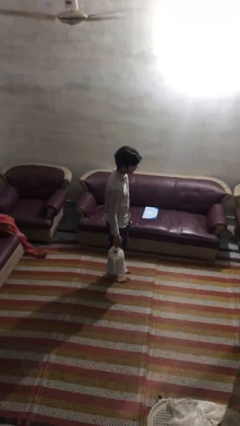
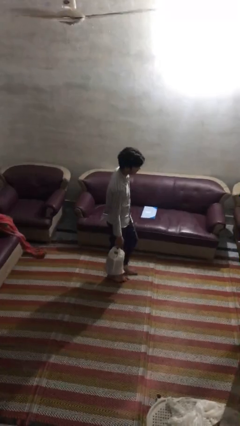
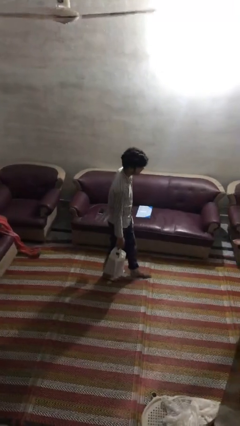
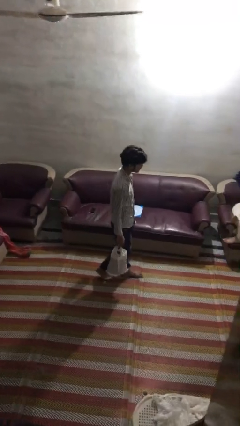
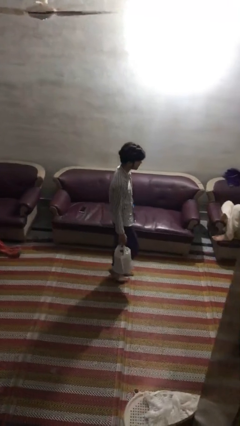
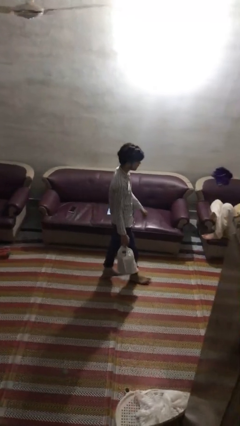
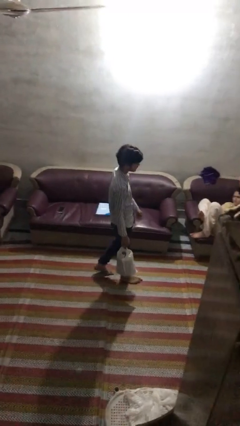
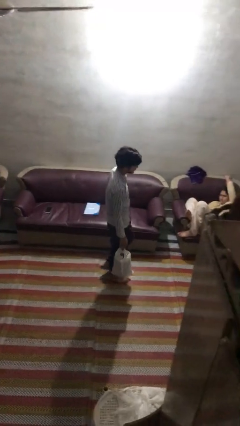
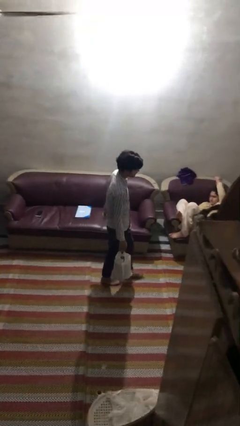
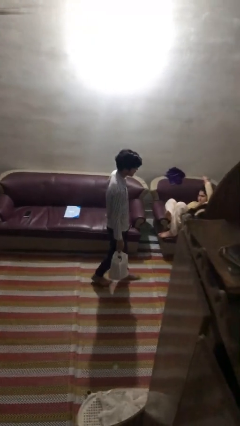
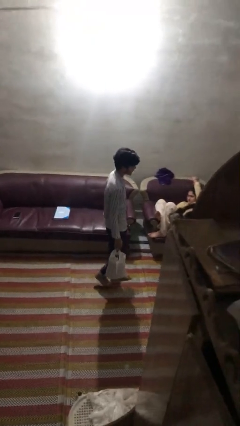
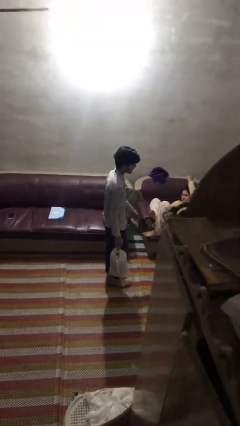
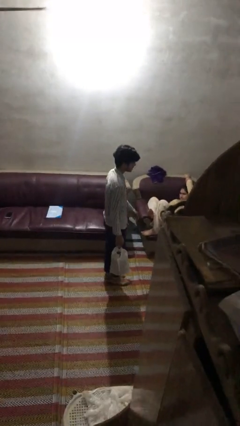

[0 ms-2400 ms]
person carries groceries

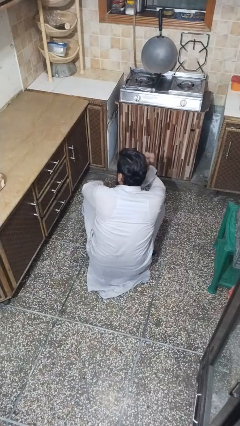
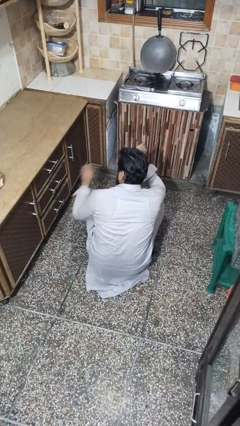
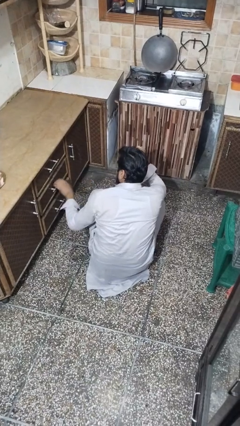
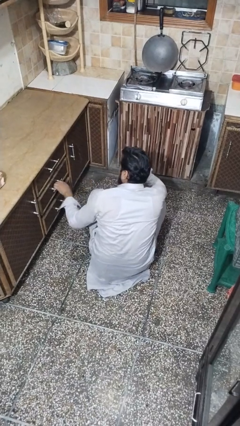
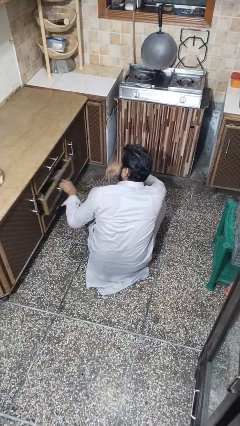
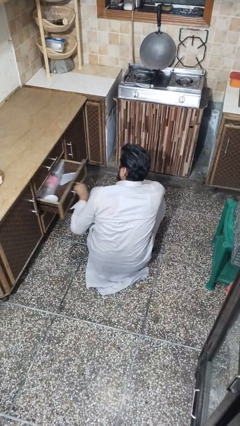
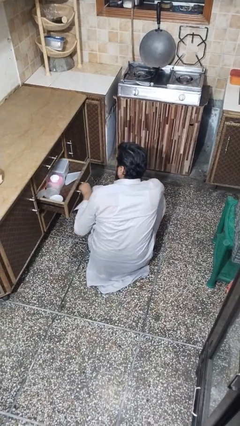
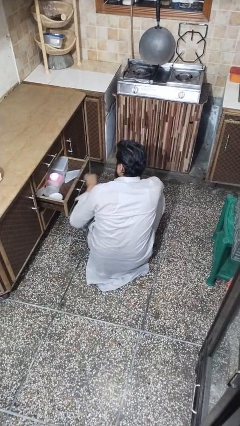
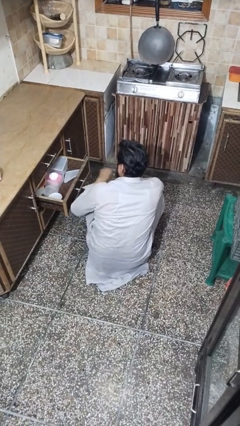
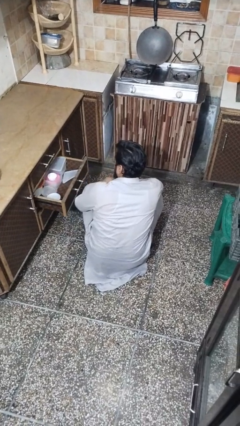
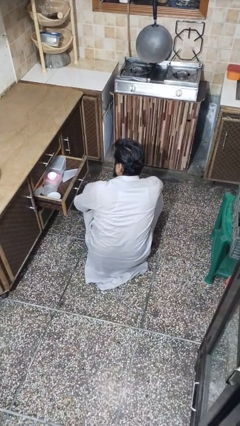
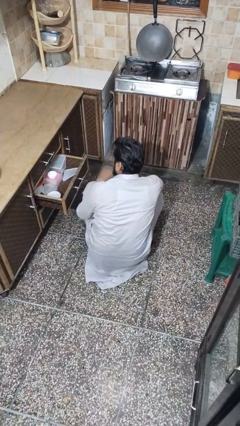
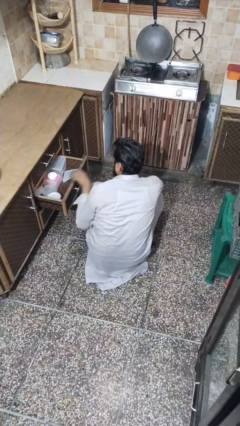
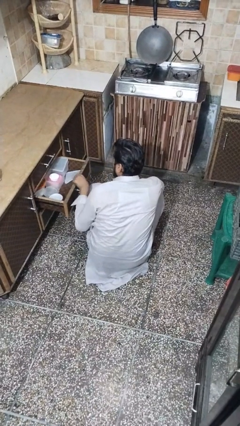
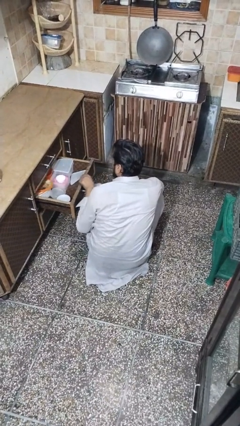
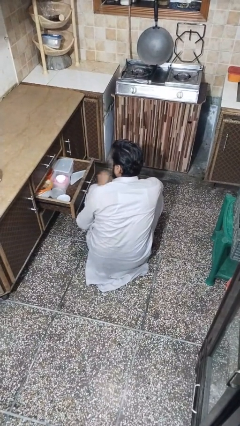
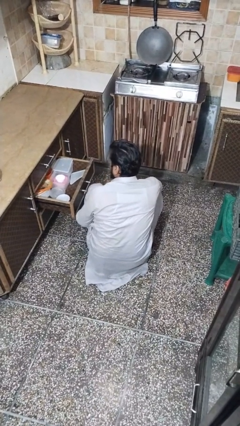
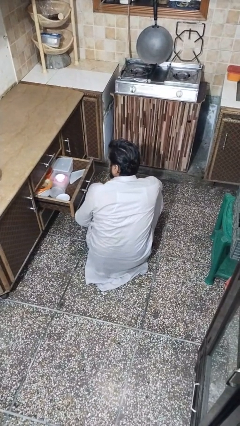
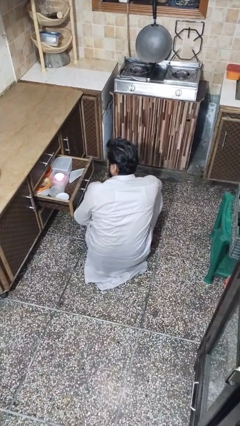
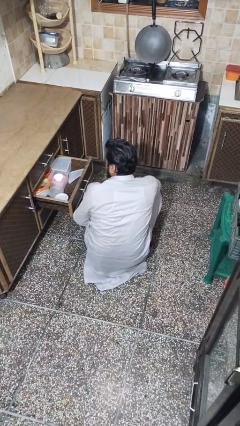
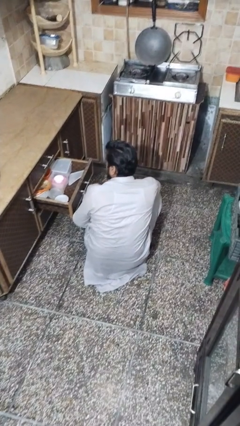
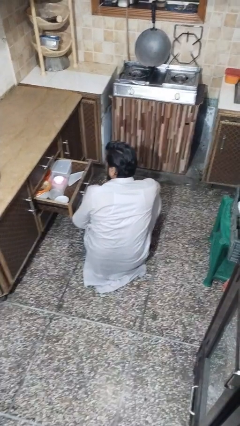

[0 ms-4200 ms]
person opens kitchen drawer

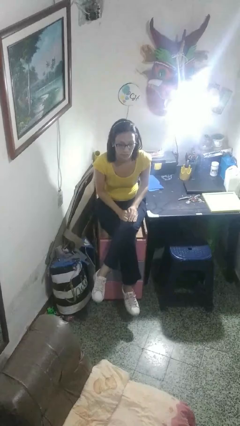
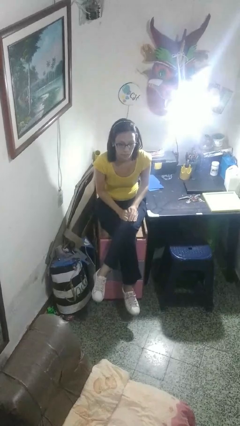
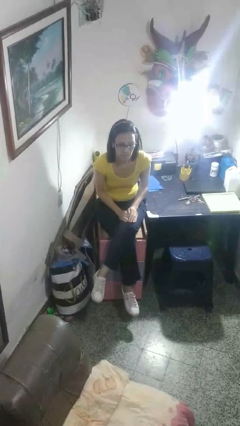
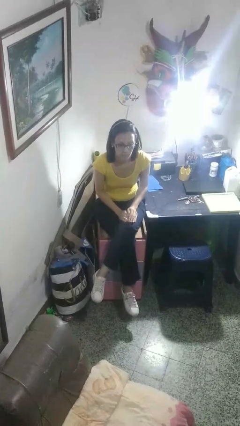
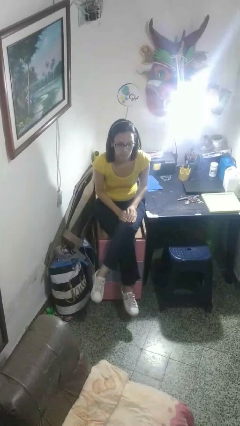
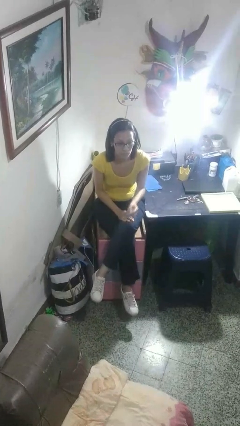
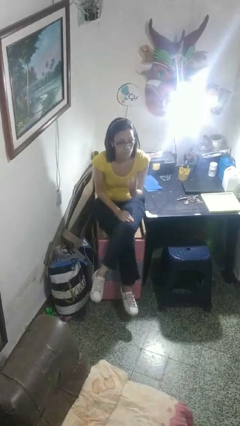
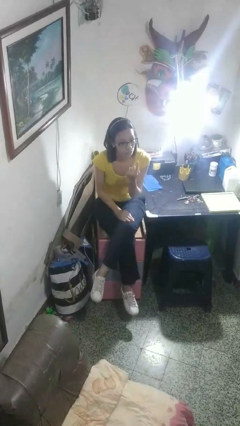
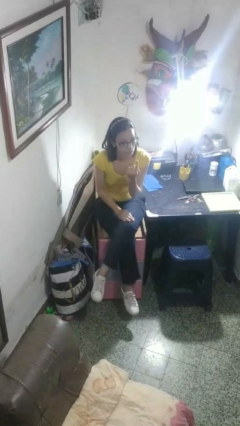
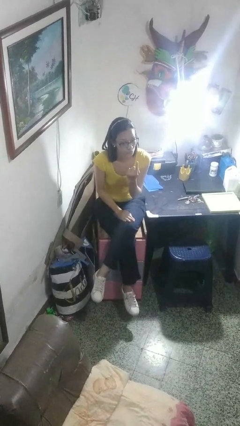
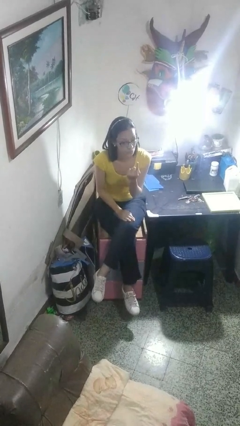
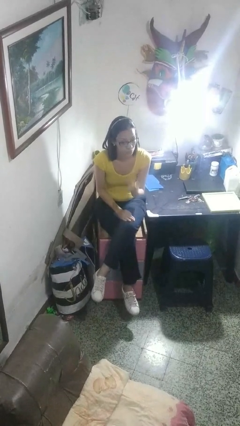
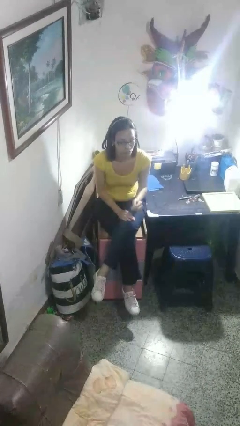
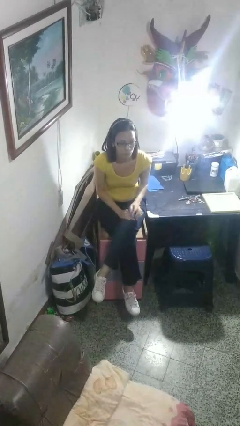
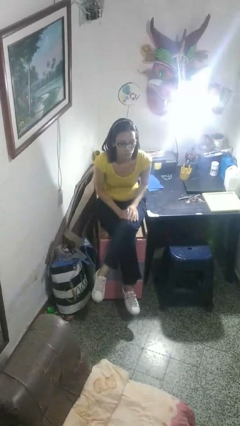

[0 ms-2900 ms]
person gestures number one

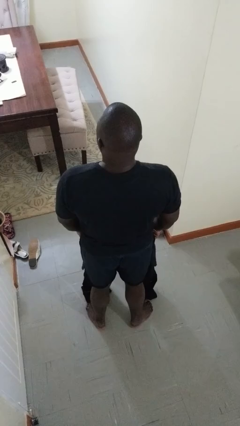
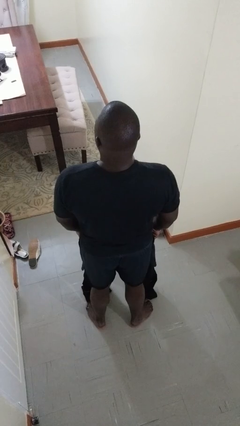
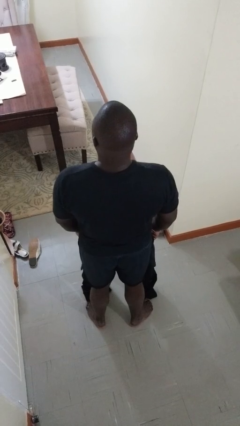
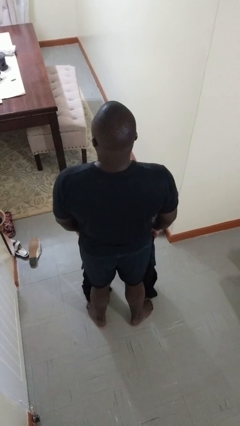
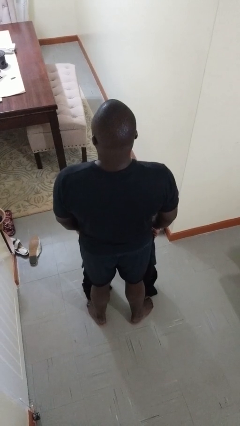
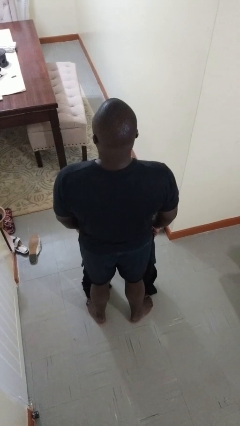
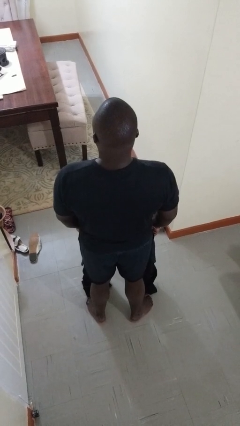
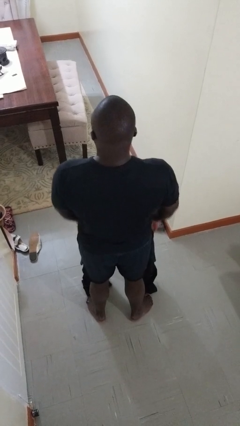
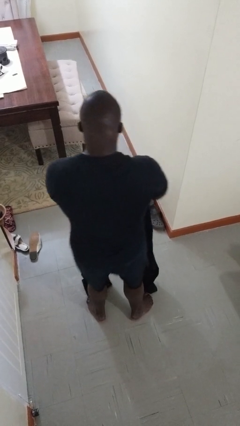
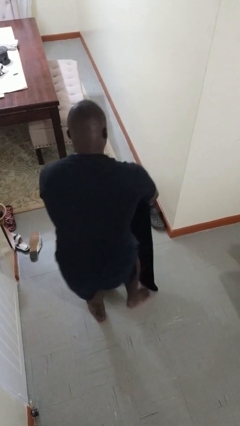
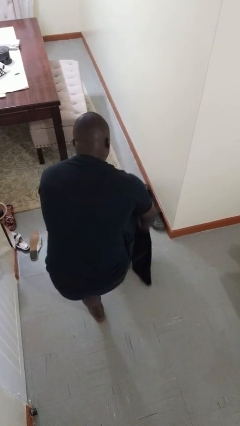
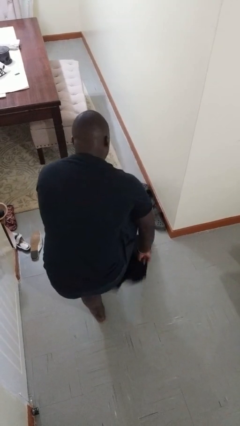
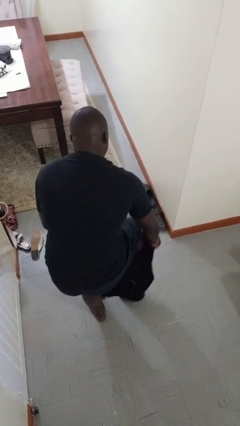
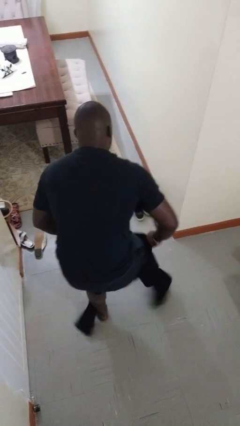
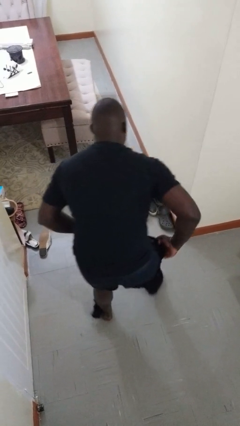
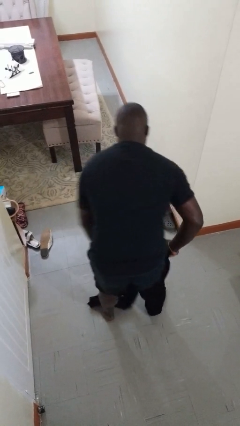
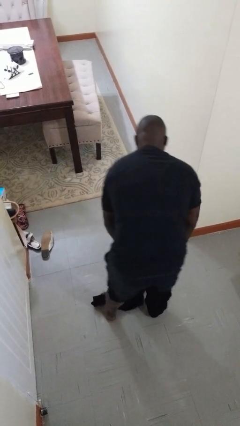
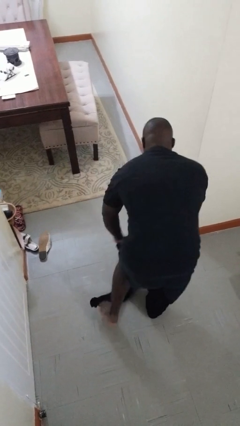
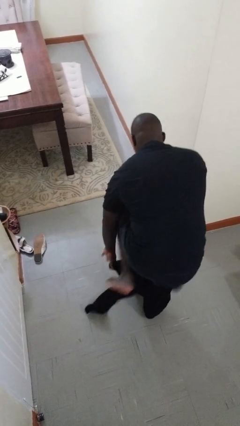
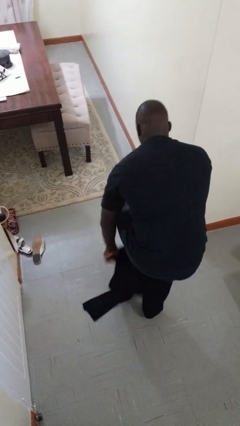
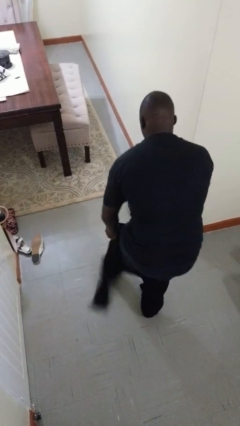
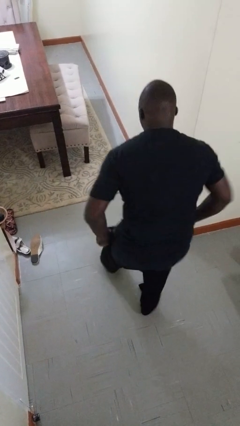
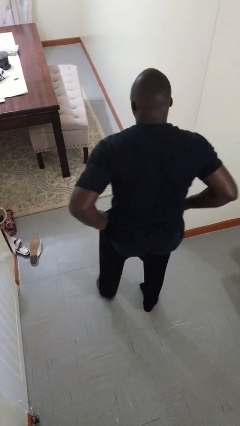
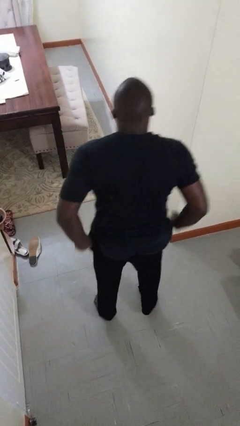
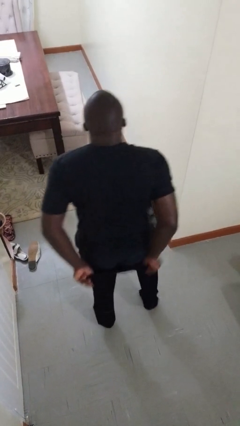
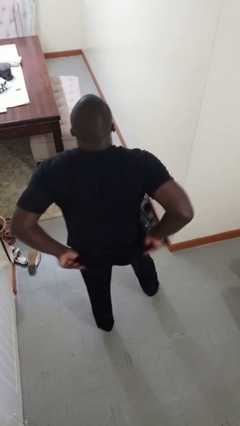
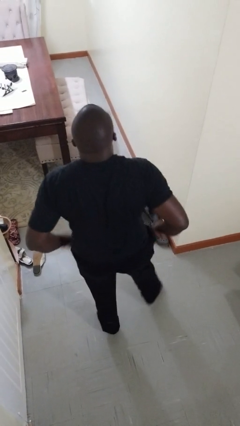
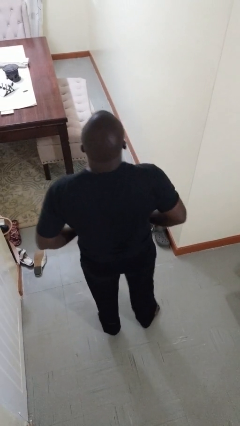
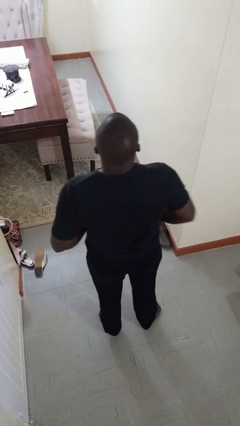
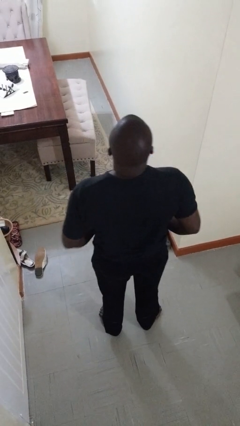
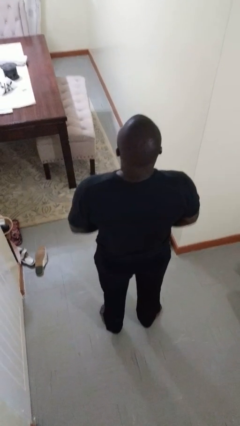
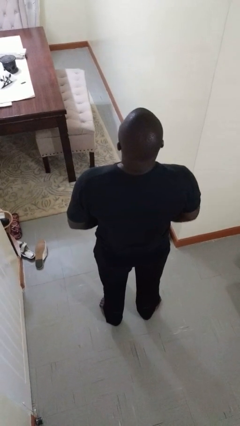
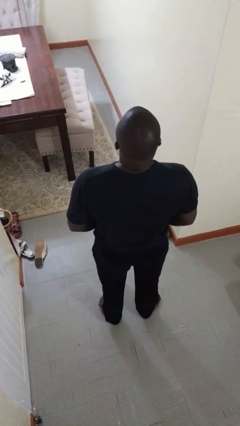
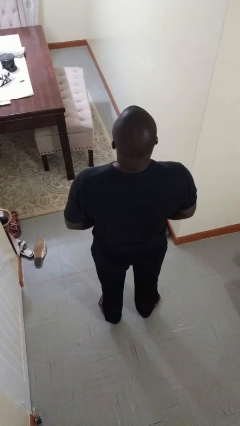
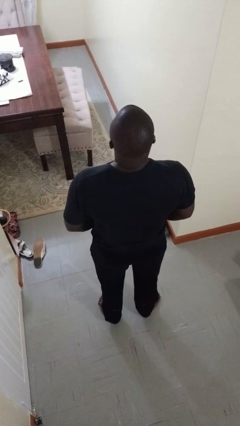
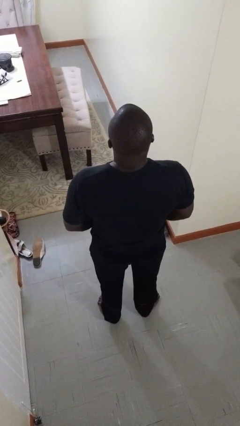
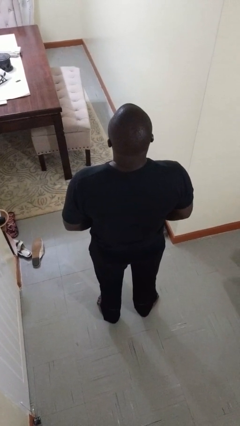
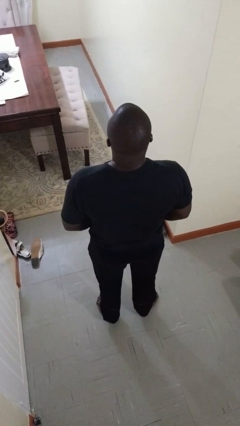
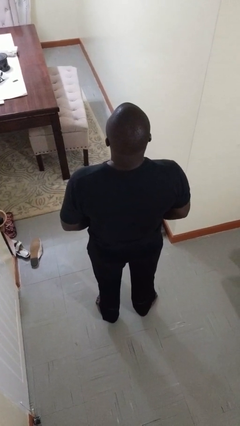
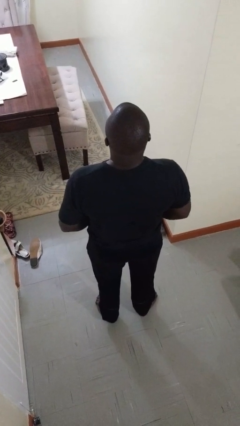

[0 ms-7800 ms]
person takes off pants

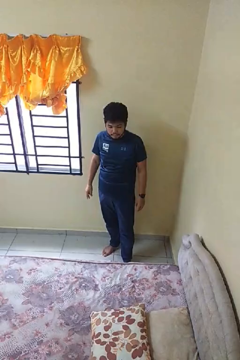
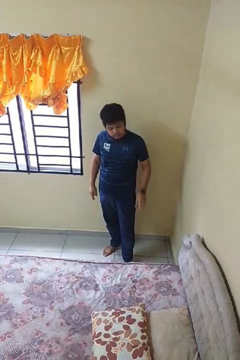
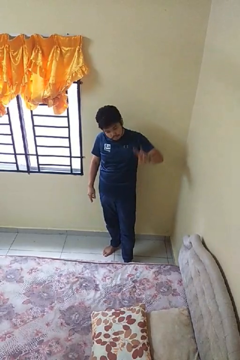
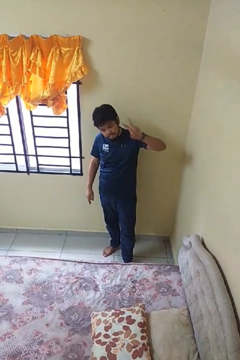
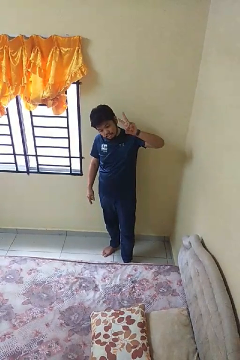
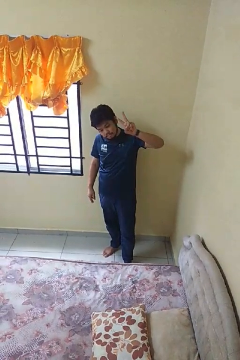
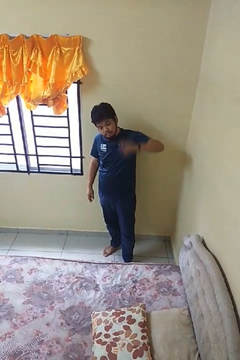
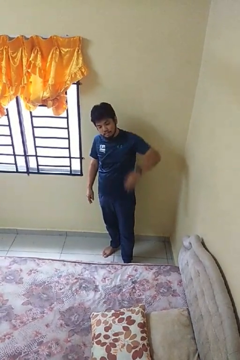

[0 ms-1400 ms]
person gestures peace
